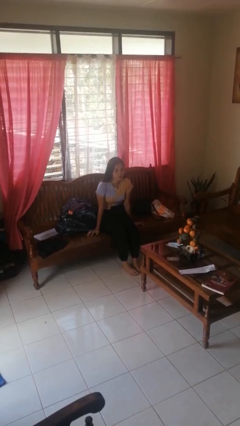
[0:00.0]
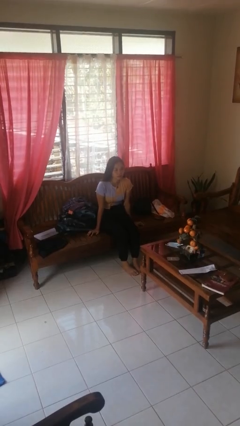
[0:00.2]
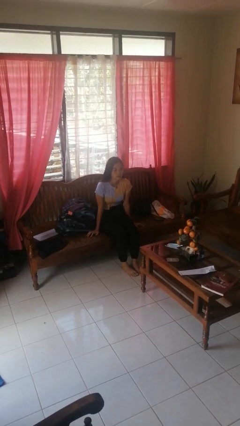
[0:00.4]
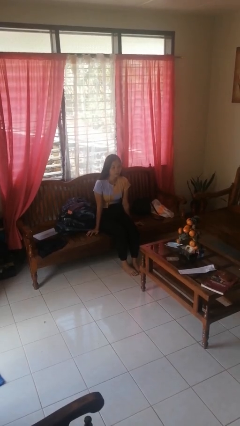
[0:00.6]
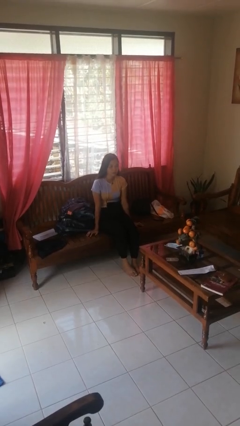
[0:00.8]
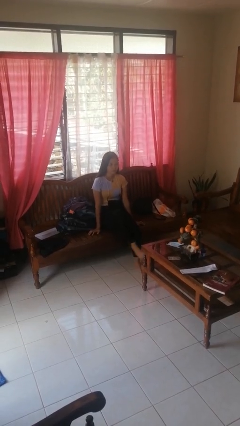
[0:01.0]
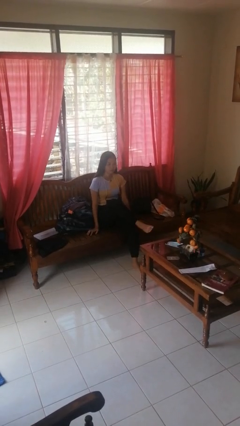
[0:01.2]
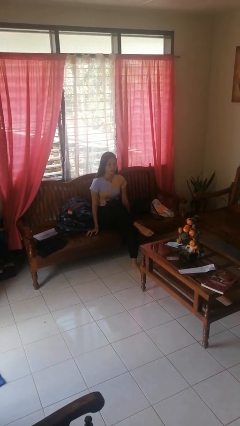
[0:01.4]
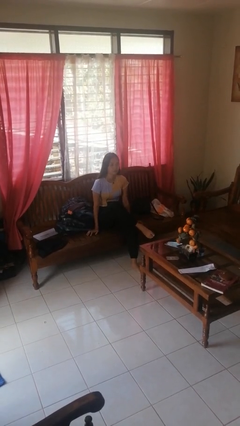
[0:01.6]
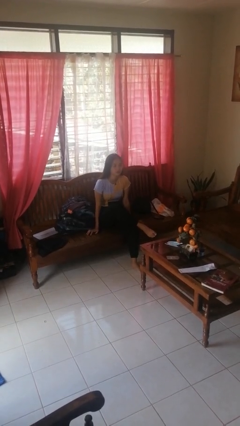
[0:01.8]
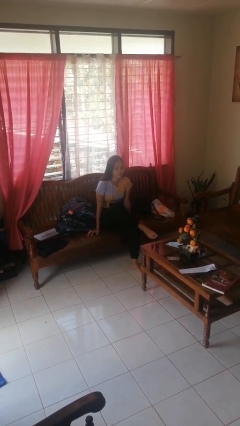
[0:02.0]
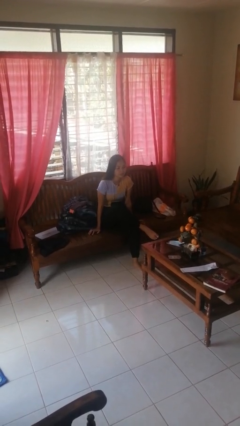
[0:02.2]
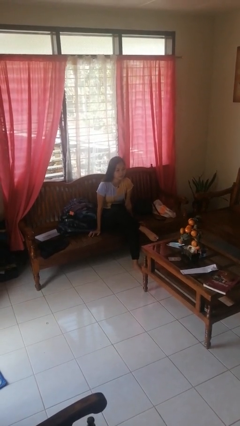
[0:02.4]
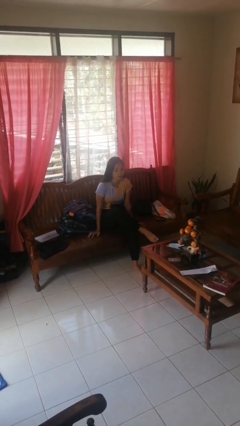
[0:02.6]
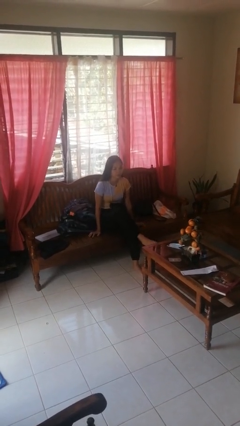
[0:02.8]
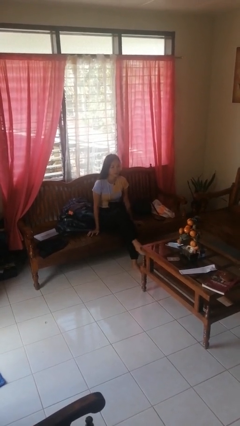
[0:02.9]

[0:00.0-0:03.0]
person crosses legs

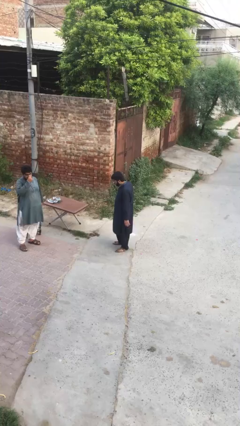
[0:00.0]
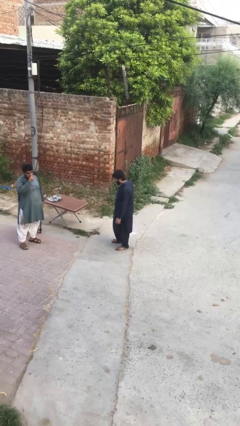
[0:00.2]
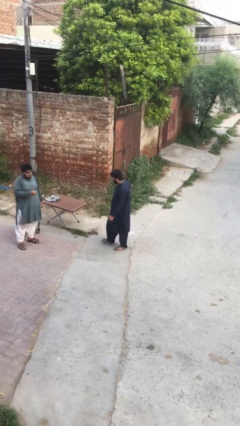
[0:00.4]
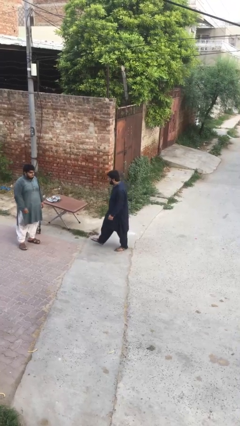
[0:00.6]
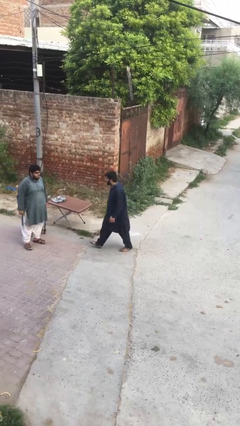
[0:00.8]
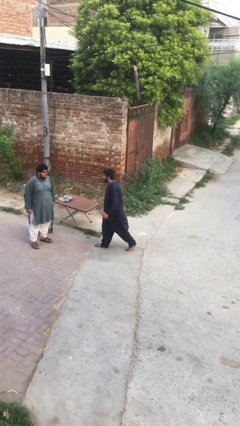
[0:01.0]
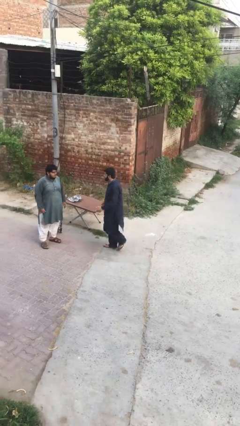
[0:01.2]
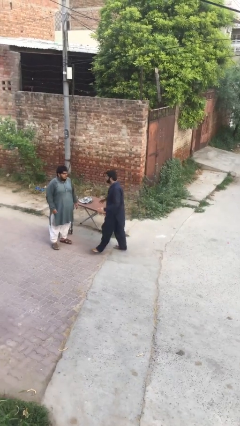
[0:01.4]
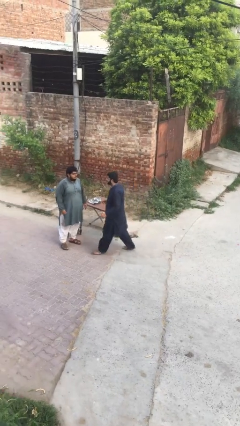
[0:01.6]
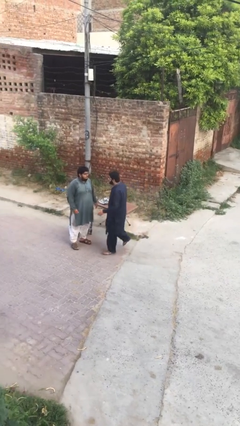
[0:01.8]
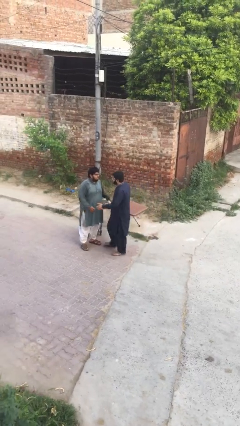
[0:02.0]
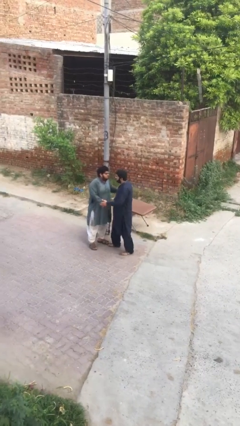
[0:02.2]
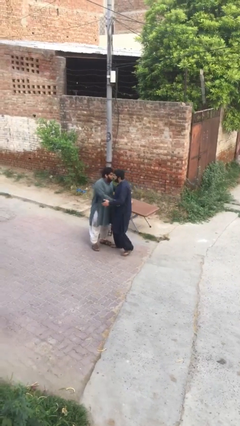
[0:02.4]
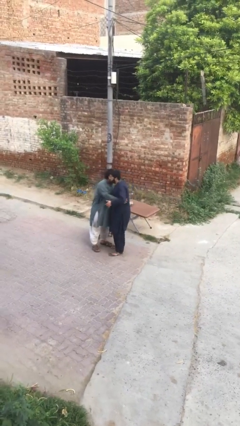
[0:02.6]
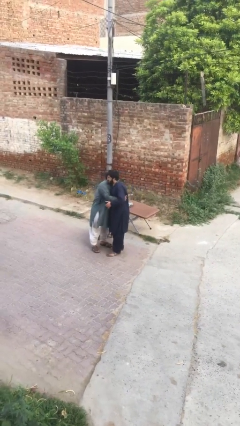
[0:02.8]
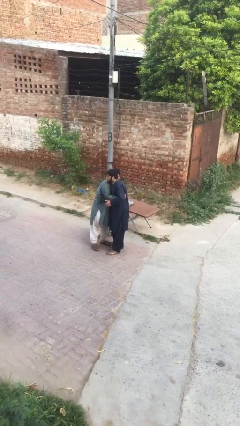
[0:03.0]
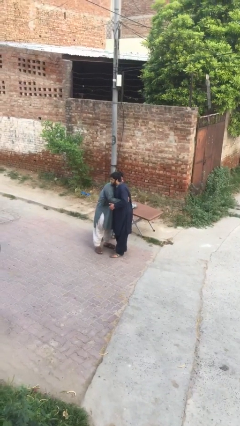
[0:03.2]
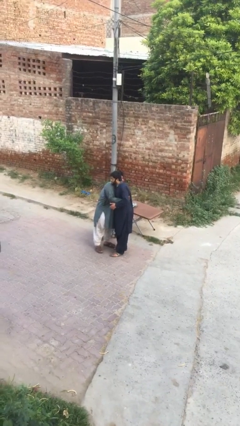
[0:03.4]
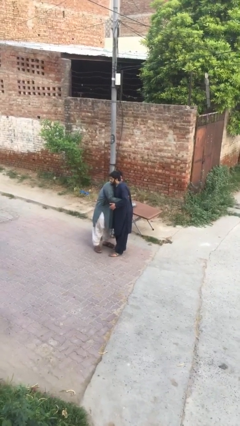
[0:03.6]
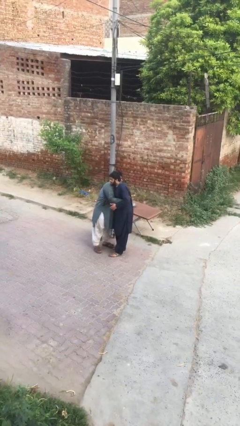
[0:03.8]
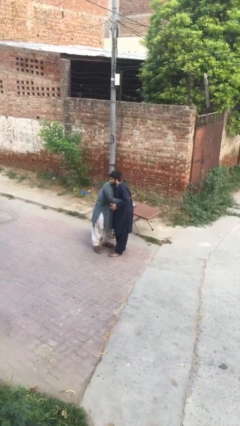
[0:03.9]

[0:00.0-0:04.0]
person embraces person

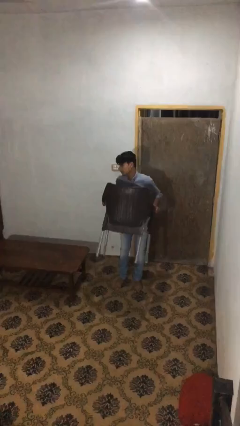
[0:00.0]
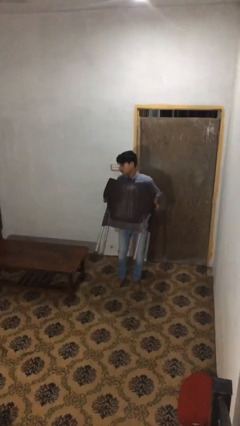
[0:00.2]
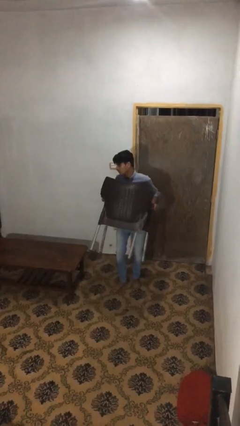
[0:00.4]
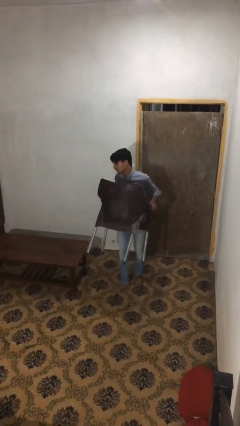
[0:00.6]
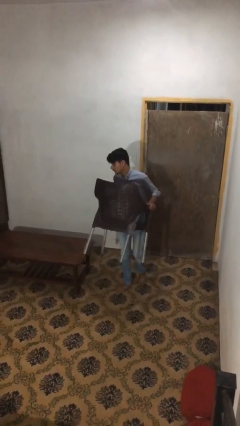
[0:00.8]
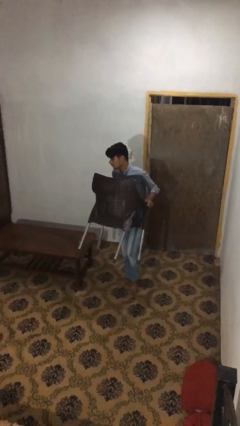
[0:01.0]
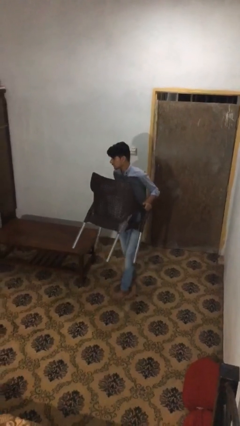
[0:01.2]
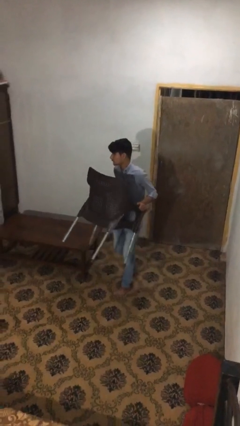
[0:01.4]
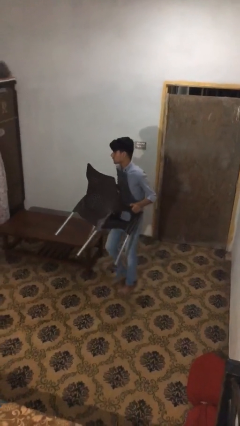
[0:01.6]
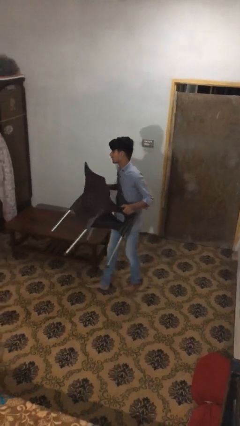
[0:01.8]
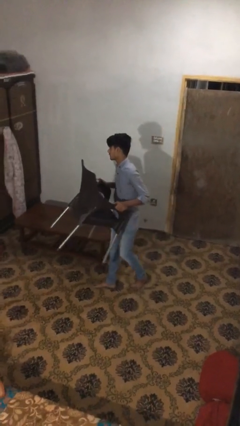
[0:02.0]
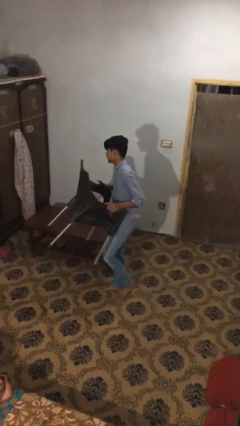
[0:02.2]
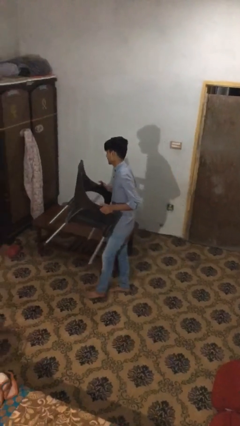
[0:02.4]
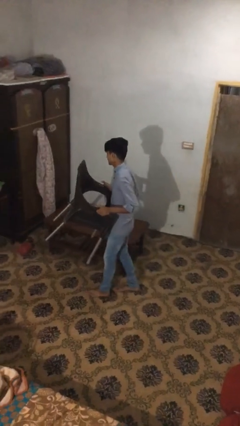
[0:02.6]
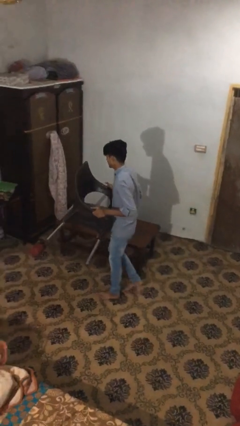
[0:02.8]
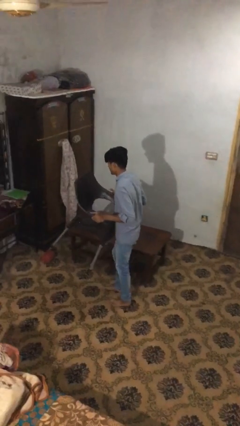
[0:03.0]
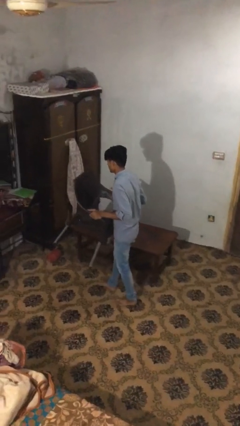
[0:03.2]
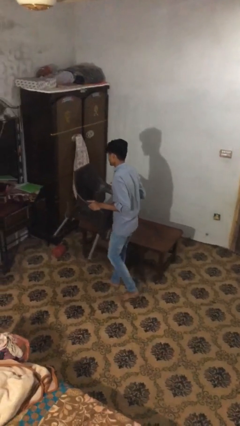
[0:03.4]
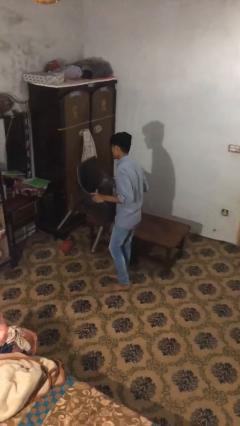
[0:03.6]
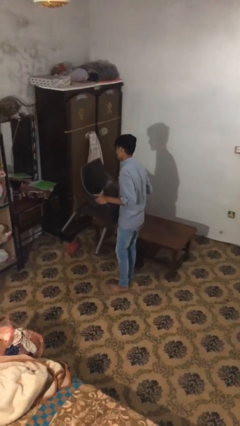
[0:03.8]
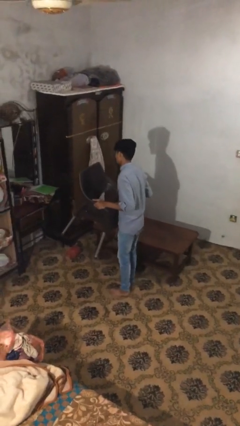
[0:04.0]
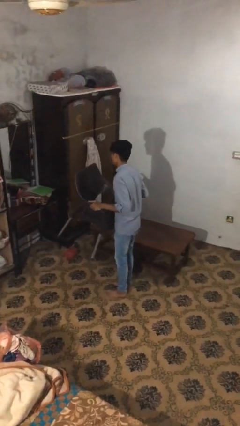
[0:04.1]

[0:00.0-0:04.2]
person carries heavy object

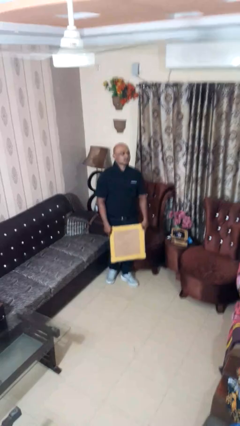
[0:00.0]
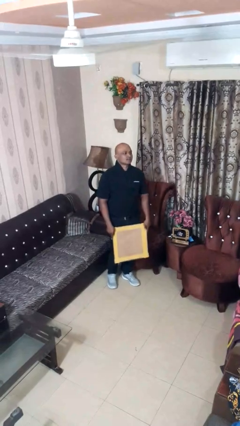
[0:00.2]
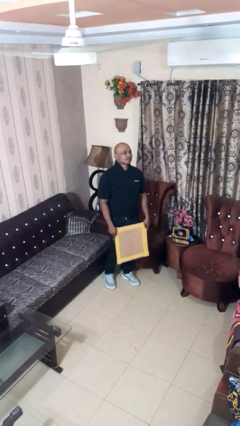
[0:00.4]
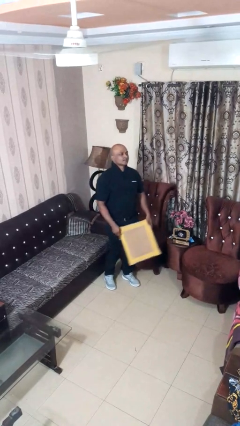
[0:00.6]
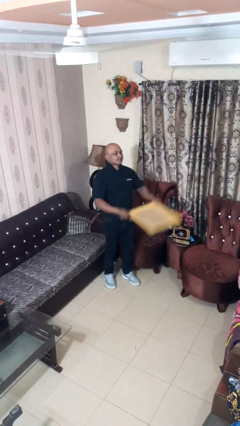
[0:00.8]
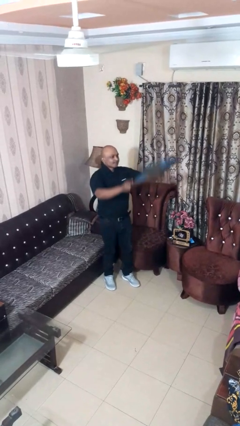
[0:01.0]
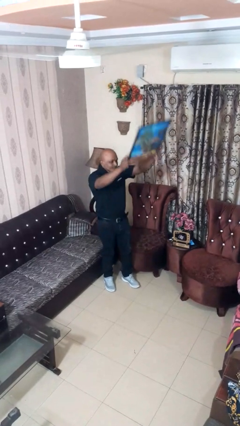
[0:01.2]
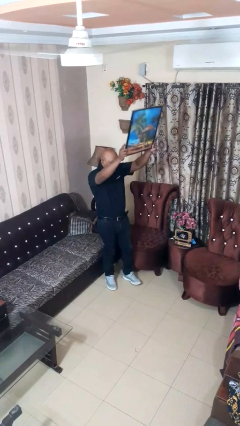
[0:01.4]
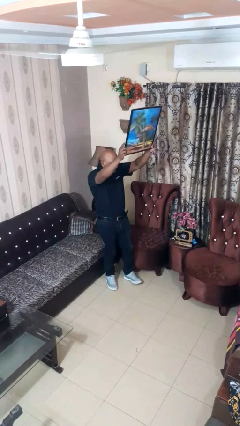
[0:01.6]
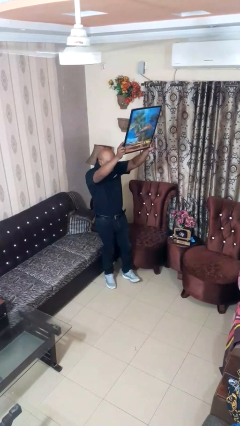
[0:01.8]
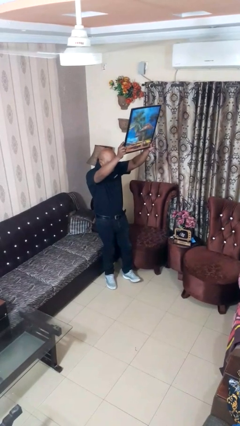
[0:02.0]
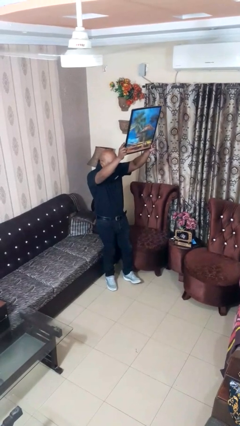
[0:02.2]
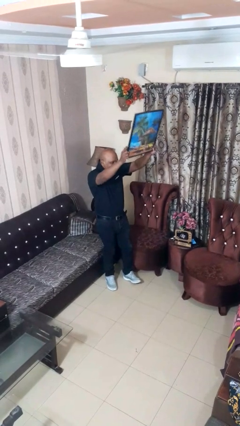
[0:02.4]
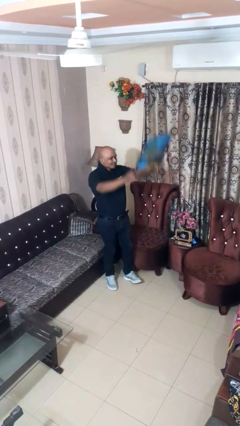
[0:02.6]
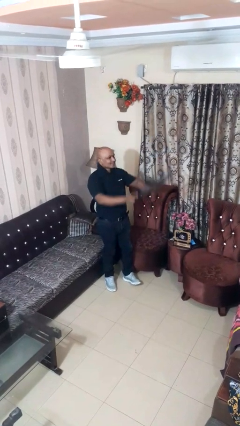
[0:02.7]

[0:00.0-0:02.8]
person holds object above head

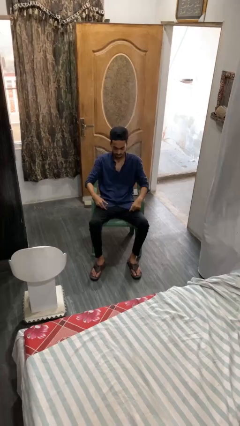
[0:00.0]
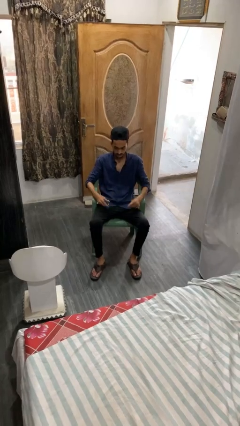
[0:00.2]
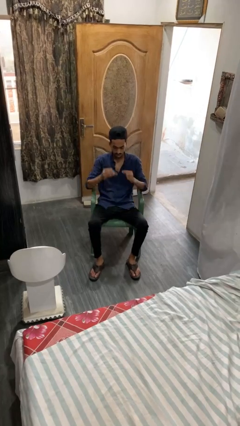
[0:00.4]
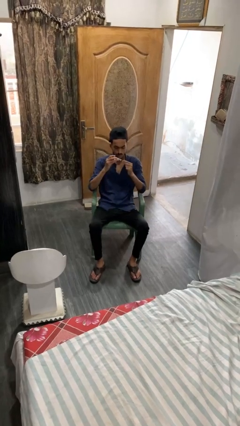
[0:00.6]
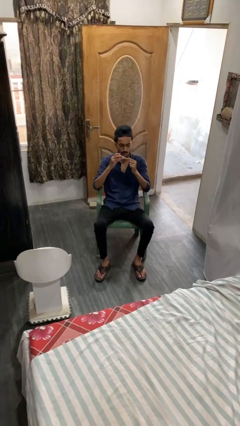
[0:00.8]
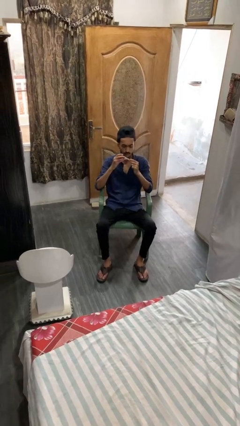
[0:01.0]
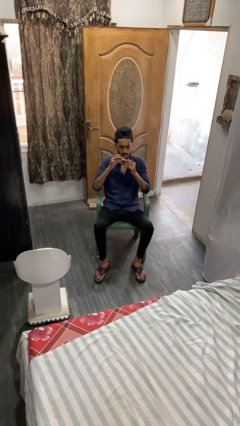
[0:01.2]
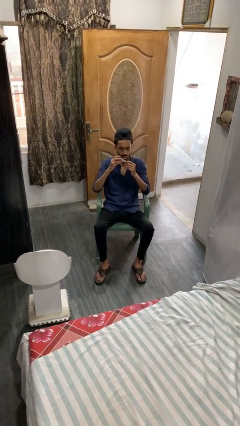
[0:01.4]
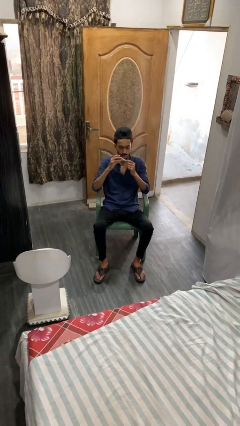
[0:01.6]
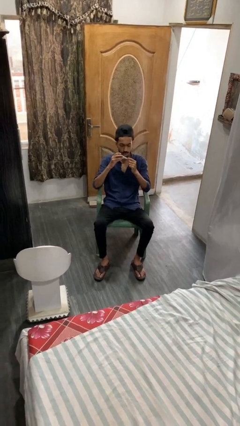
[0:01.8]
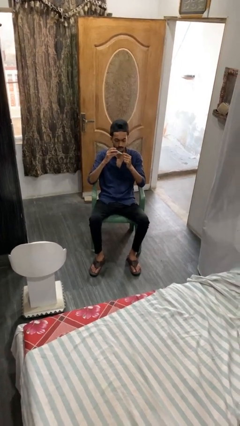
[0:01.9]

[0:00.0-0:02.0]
person clips fingernails

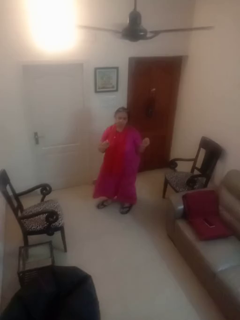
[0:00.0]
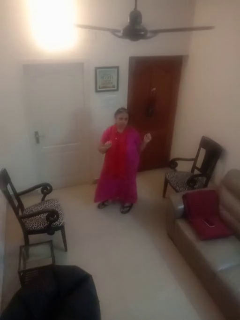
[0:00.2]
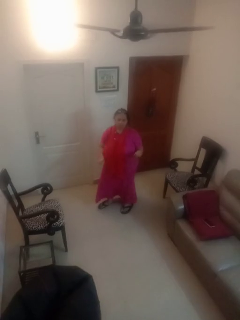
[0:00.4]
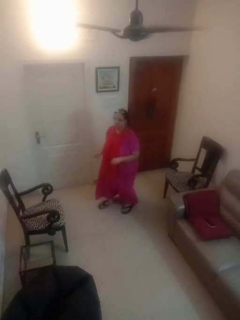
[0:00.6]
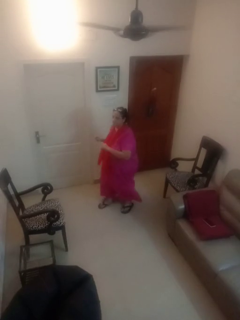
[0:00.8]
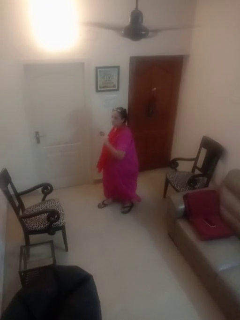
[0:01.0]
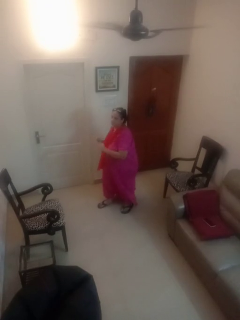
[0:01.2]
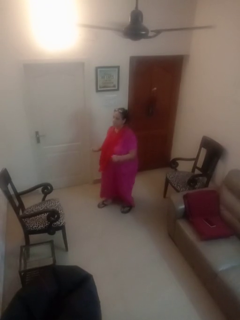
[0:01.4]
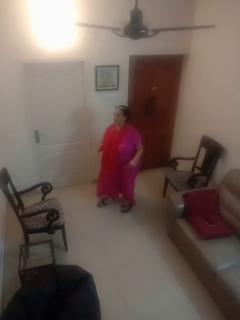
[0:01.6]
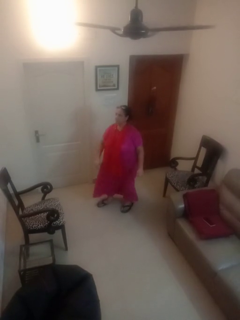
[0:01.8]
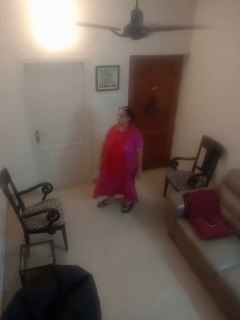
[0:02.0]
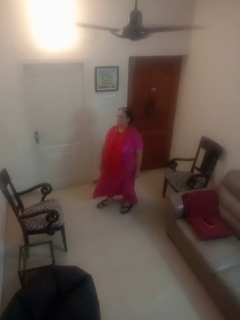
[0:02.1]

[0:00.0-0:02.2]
person dances in place
